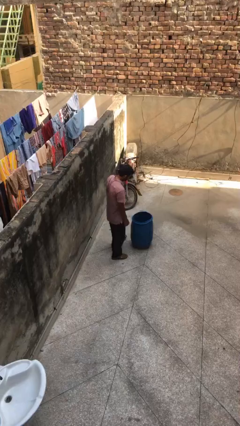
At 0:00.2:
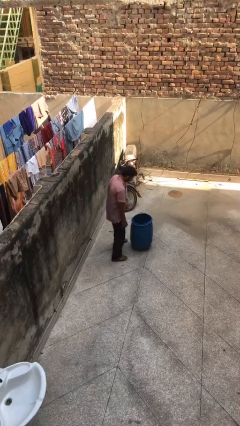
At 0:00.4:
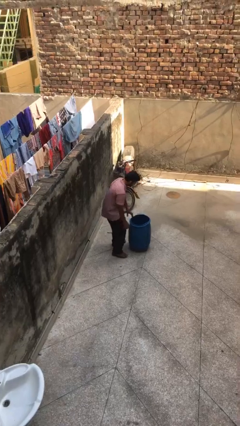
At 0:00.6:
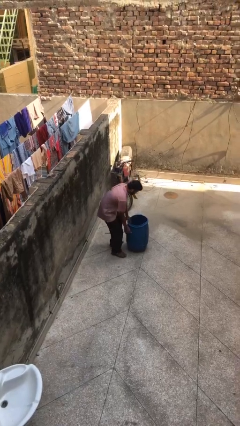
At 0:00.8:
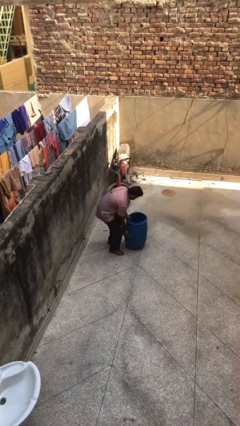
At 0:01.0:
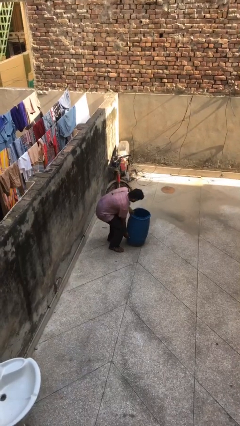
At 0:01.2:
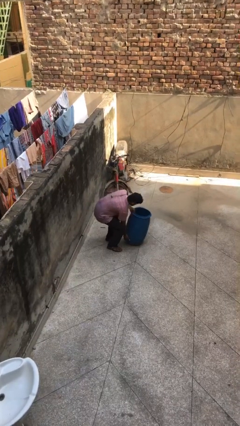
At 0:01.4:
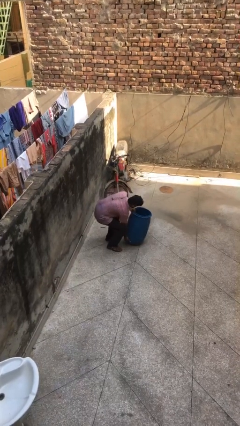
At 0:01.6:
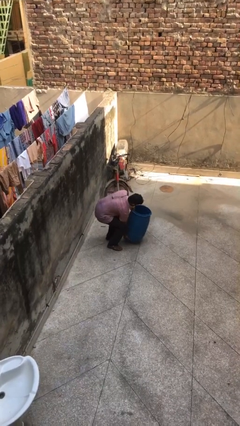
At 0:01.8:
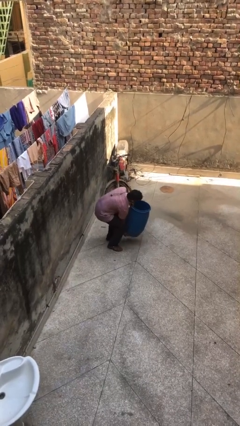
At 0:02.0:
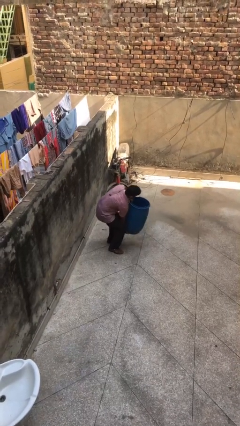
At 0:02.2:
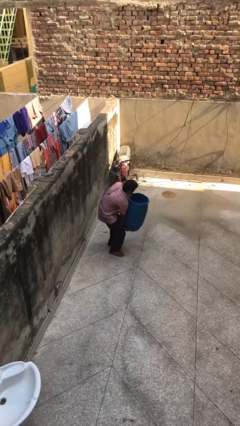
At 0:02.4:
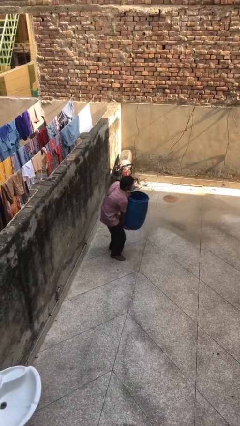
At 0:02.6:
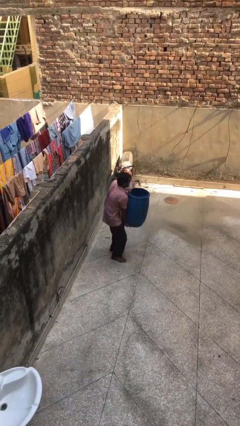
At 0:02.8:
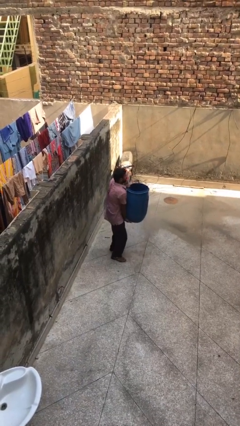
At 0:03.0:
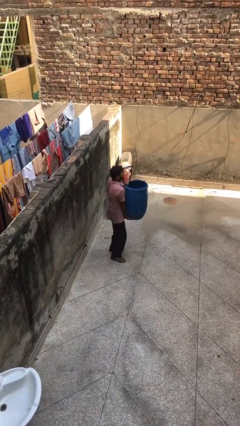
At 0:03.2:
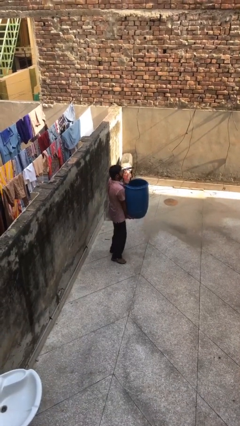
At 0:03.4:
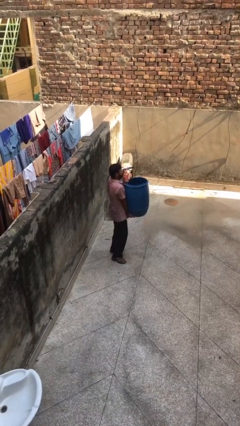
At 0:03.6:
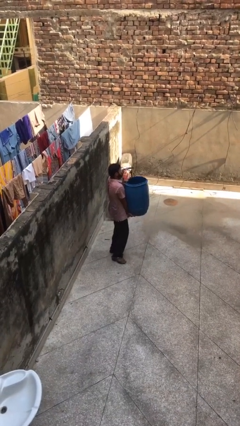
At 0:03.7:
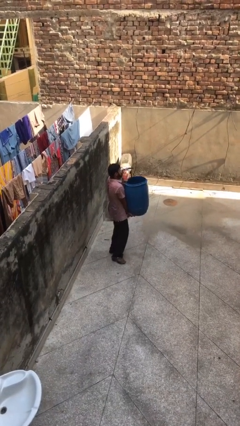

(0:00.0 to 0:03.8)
person picks up object from floor

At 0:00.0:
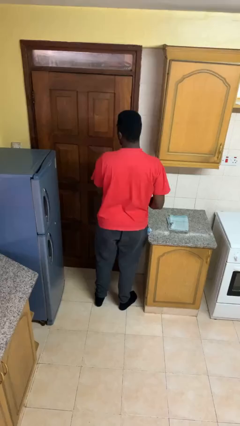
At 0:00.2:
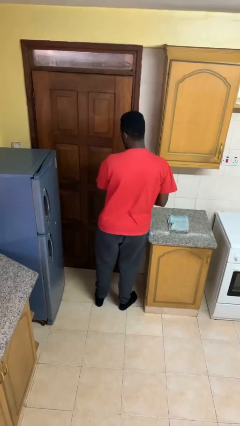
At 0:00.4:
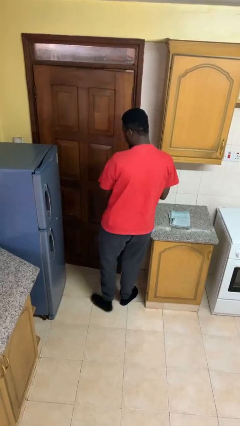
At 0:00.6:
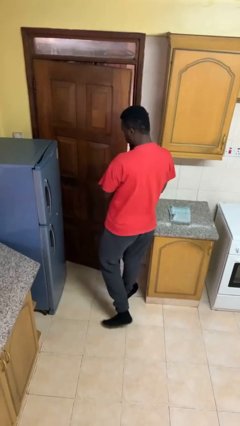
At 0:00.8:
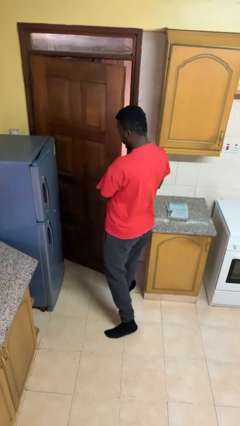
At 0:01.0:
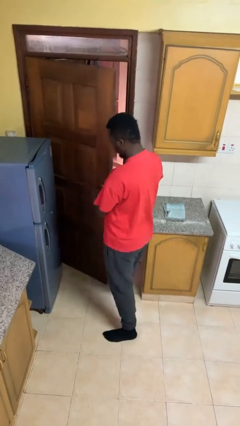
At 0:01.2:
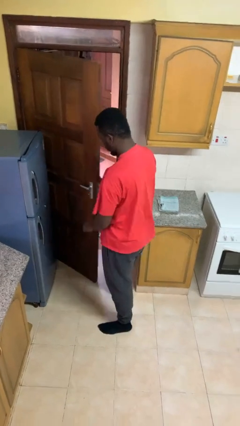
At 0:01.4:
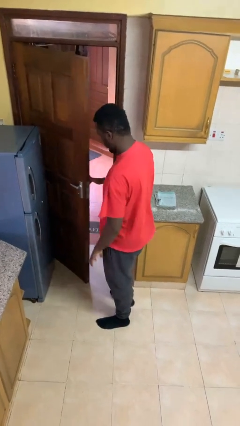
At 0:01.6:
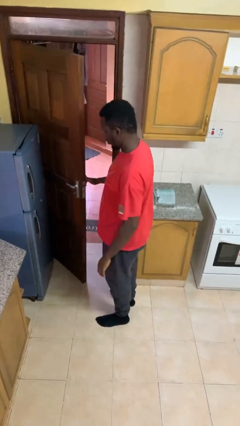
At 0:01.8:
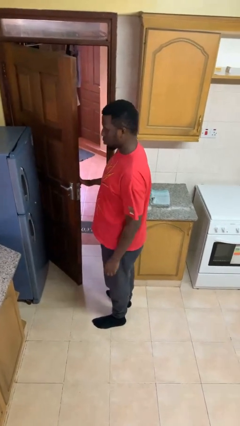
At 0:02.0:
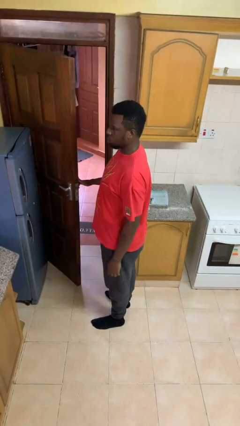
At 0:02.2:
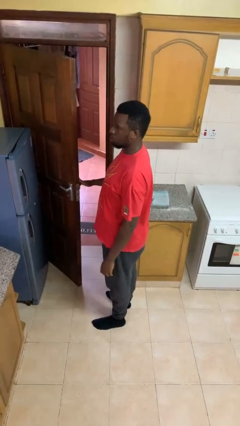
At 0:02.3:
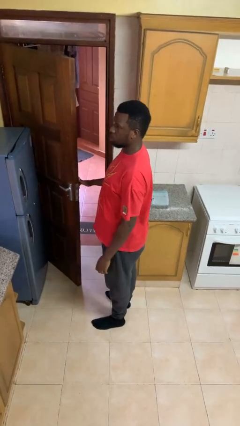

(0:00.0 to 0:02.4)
person opens facility door

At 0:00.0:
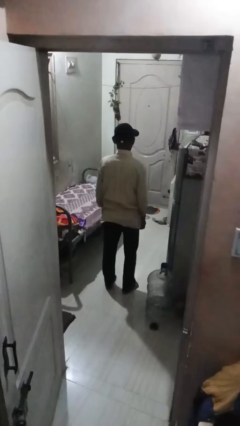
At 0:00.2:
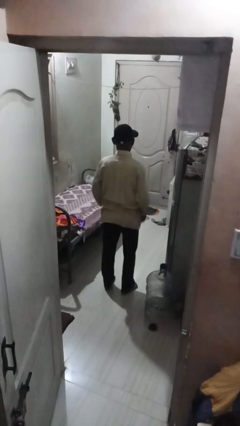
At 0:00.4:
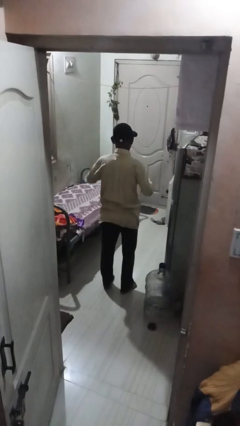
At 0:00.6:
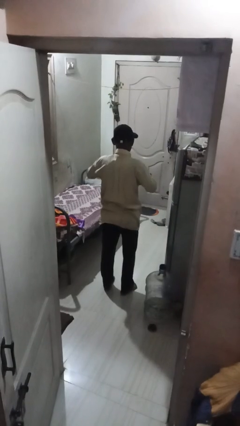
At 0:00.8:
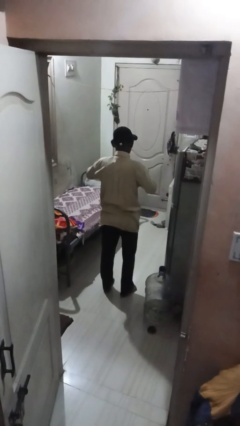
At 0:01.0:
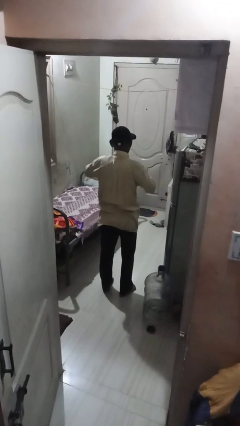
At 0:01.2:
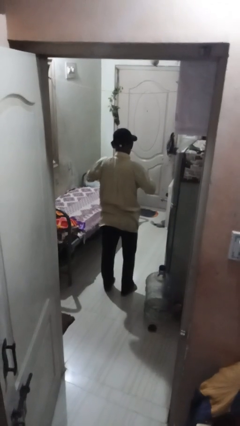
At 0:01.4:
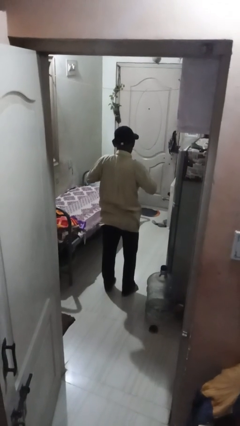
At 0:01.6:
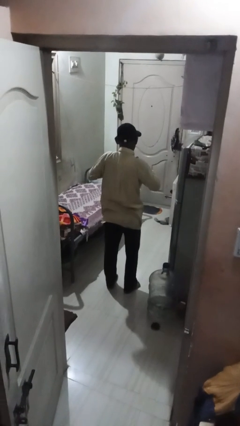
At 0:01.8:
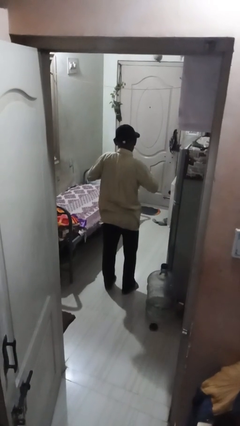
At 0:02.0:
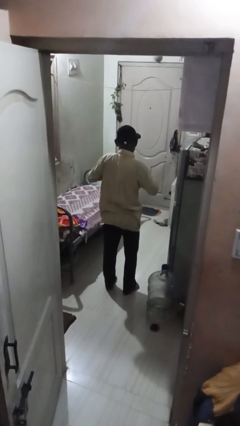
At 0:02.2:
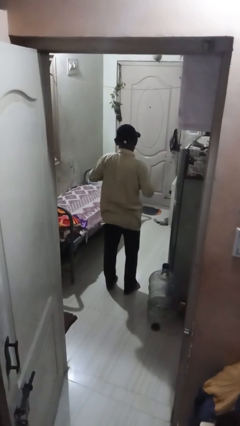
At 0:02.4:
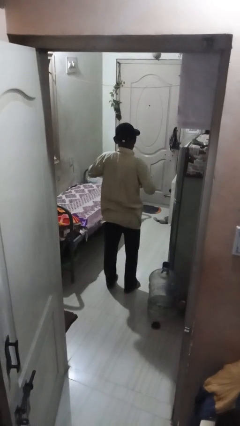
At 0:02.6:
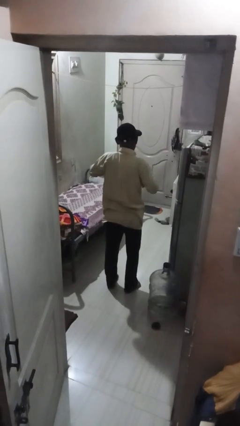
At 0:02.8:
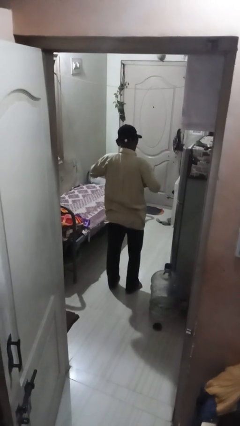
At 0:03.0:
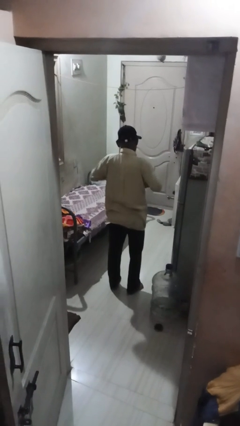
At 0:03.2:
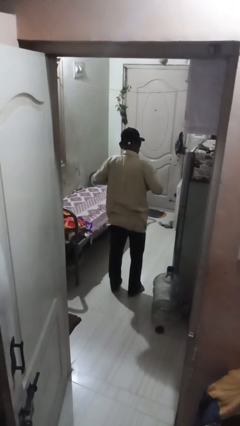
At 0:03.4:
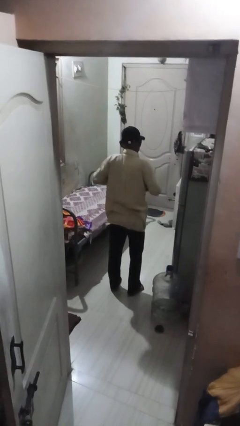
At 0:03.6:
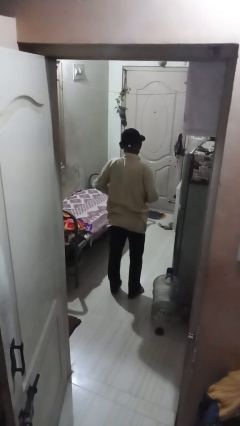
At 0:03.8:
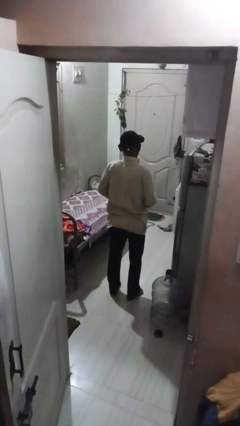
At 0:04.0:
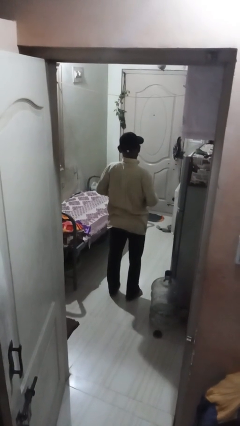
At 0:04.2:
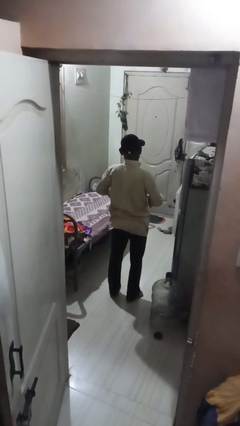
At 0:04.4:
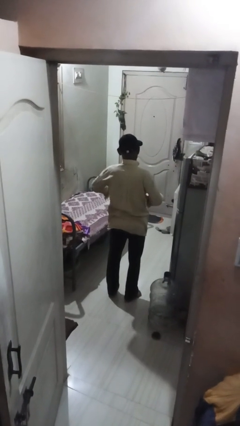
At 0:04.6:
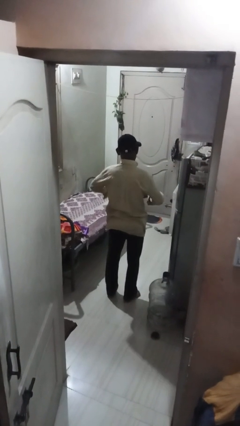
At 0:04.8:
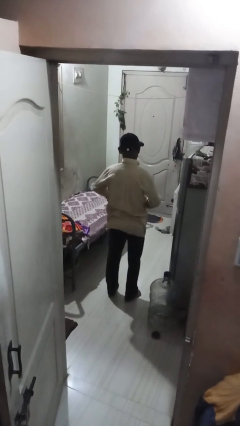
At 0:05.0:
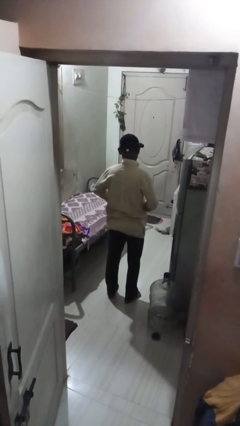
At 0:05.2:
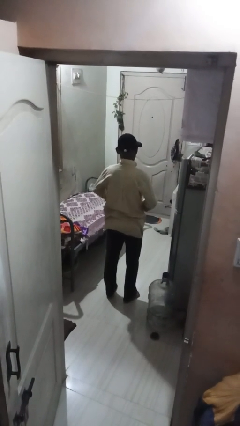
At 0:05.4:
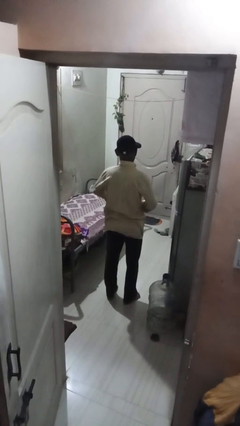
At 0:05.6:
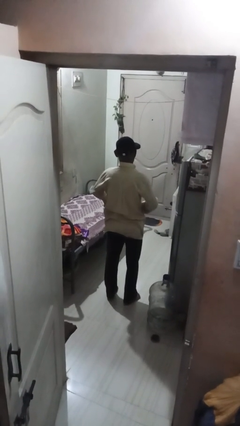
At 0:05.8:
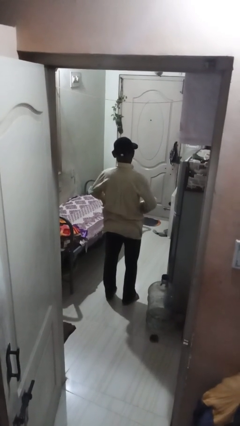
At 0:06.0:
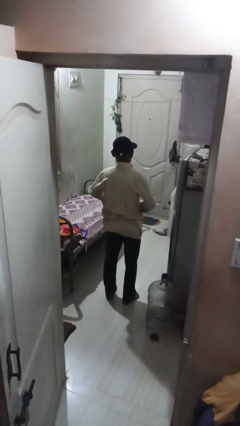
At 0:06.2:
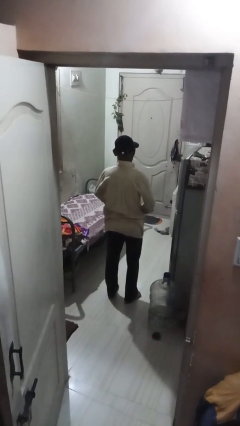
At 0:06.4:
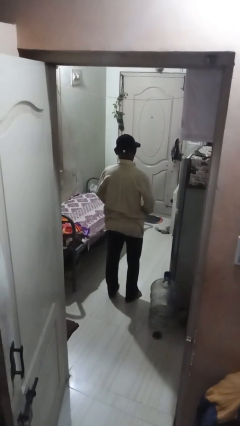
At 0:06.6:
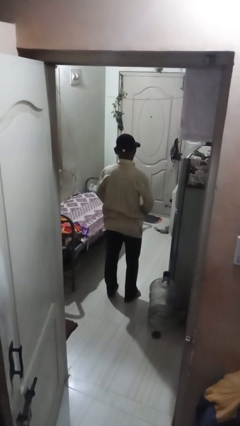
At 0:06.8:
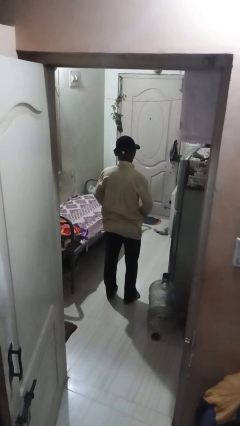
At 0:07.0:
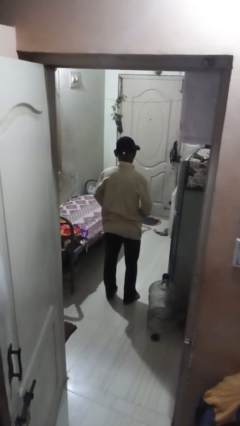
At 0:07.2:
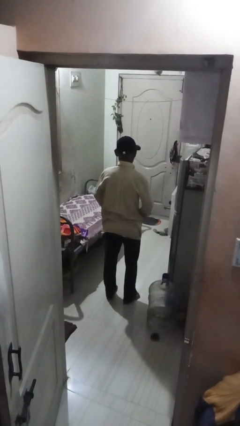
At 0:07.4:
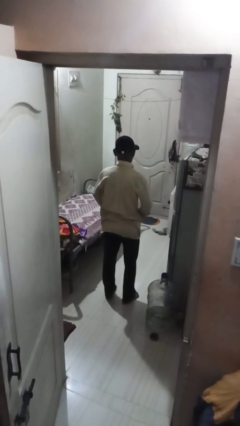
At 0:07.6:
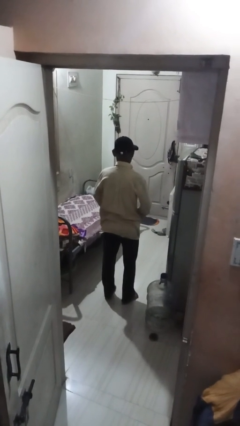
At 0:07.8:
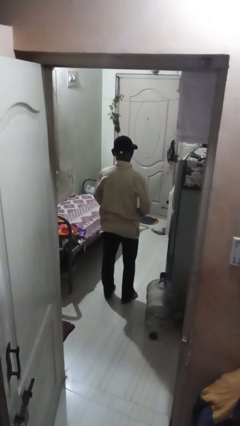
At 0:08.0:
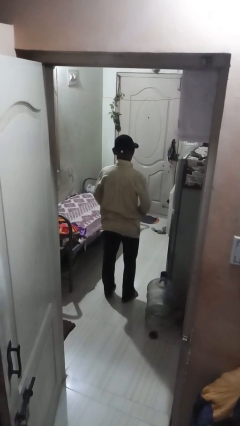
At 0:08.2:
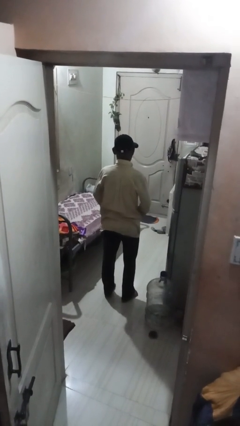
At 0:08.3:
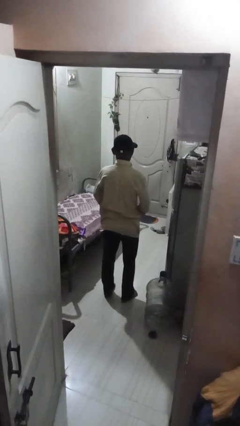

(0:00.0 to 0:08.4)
person unbuttons shirt

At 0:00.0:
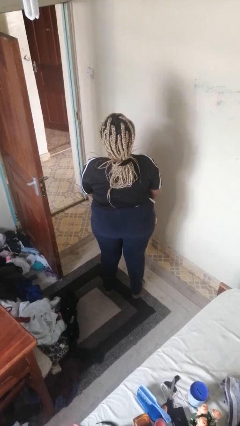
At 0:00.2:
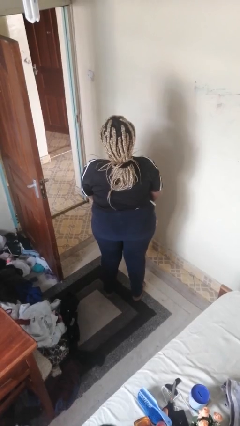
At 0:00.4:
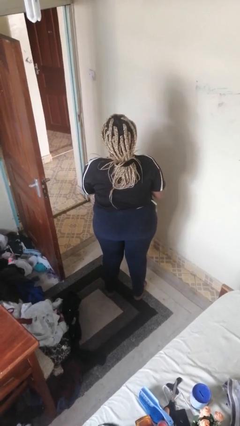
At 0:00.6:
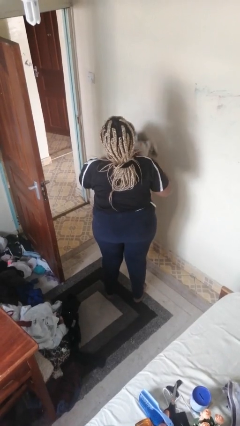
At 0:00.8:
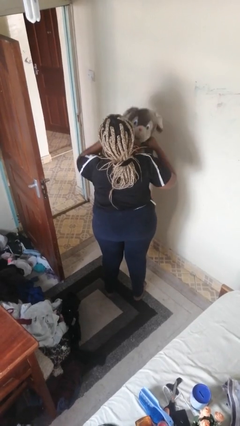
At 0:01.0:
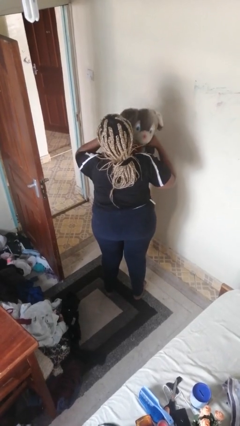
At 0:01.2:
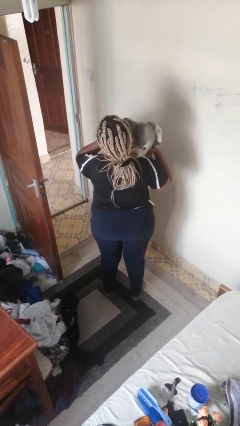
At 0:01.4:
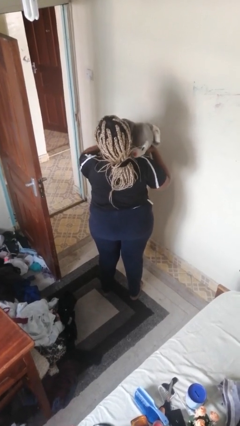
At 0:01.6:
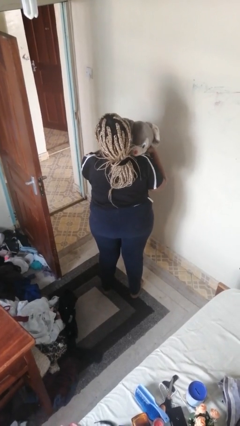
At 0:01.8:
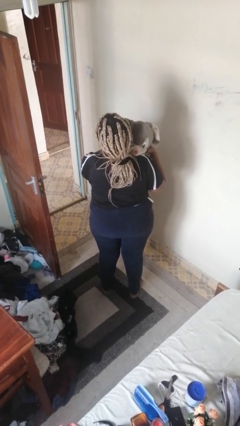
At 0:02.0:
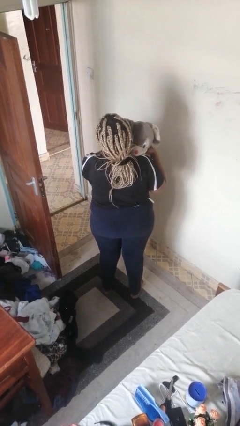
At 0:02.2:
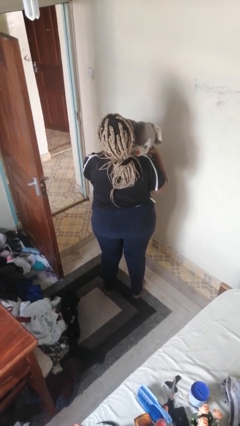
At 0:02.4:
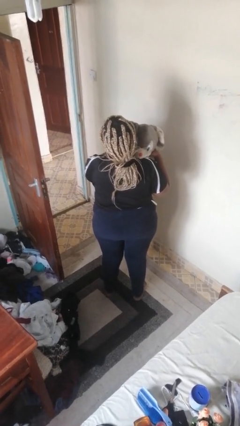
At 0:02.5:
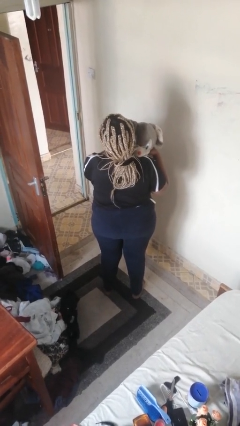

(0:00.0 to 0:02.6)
person hugs stuffed animal

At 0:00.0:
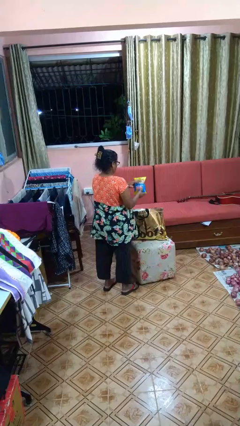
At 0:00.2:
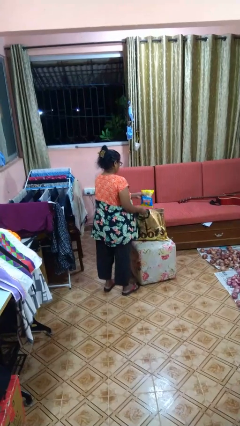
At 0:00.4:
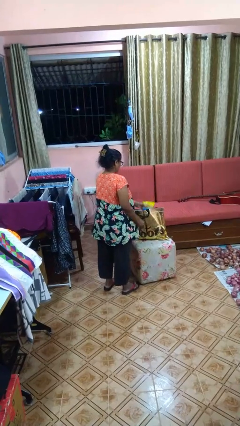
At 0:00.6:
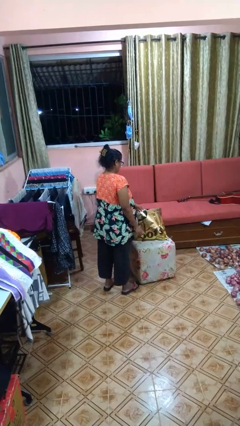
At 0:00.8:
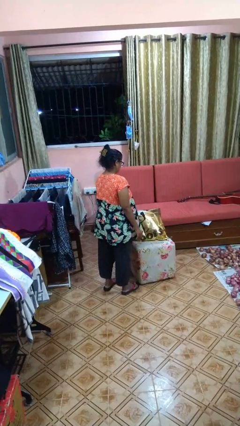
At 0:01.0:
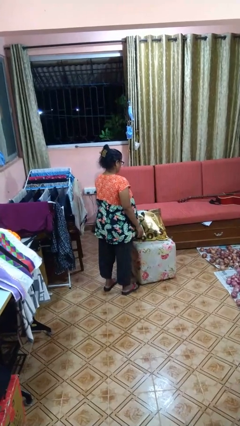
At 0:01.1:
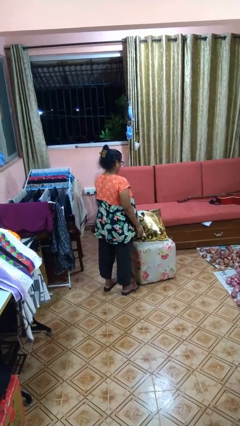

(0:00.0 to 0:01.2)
person puts object into bag
